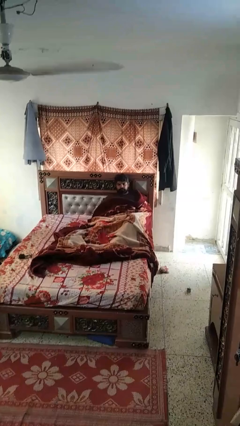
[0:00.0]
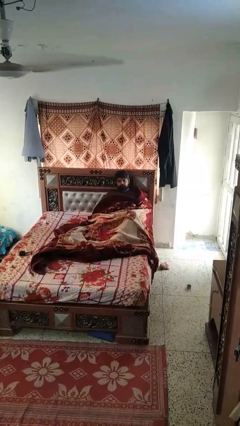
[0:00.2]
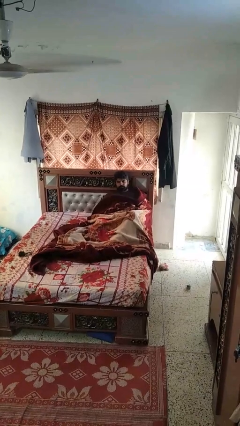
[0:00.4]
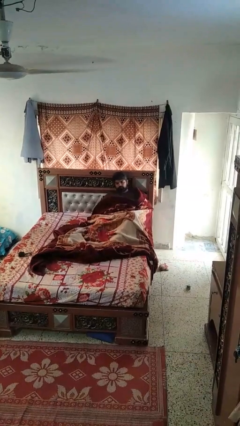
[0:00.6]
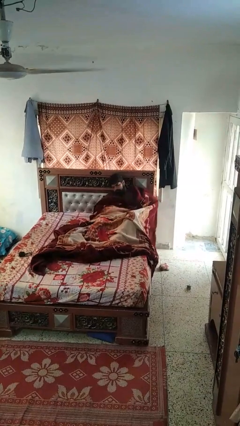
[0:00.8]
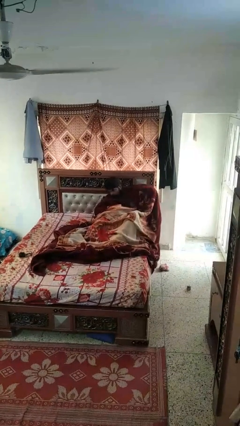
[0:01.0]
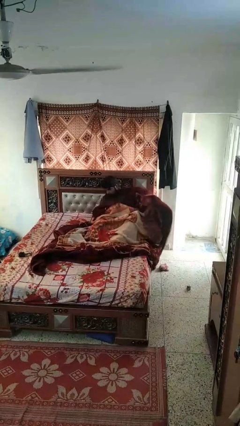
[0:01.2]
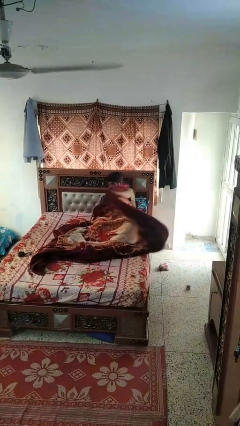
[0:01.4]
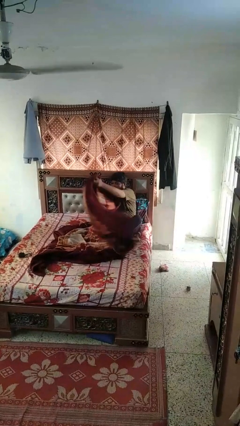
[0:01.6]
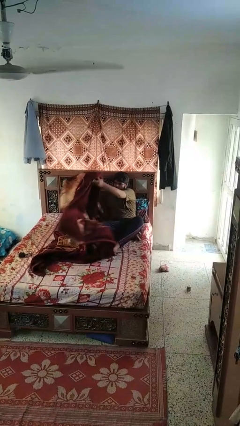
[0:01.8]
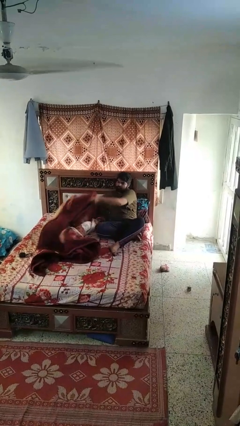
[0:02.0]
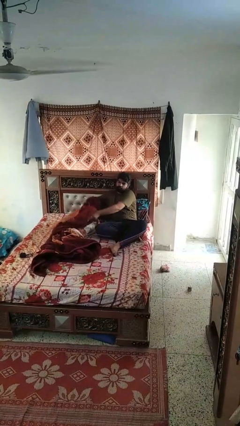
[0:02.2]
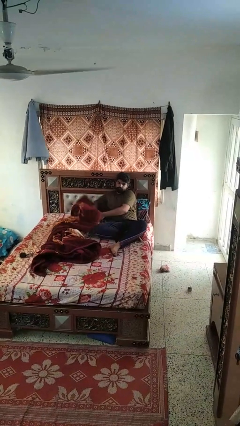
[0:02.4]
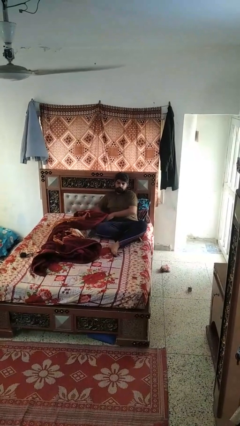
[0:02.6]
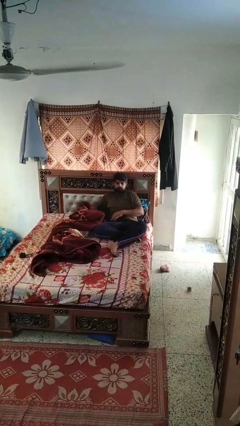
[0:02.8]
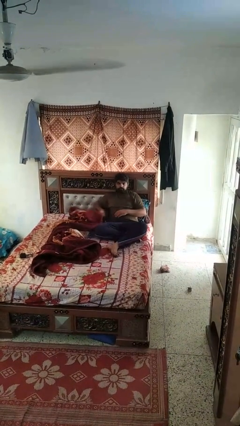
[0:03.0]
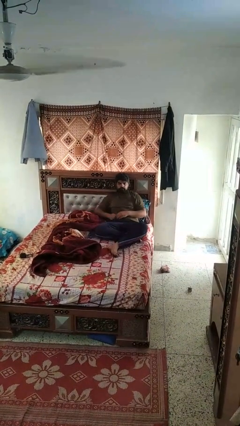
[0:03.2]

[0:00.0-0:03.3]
person uncovers with blanket

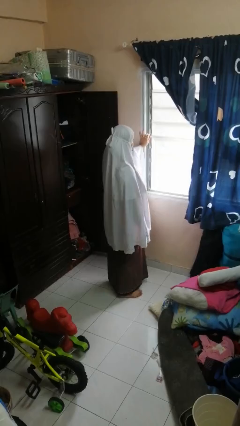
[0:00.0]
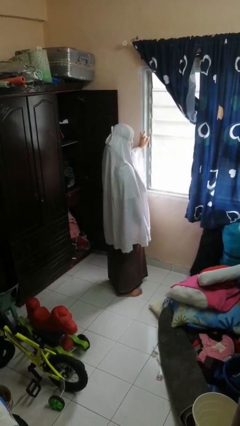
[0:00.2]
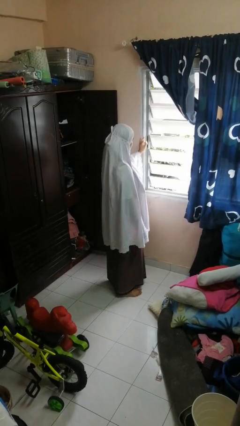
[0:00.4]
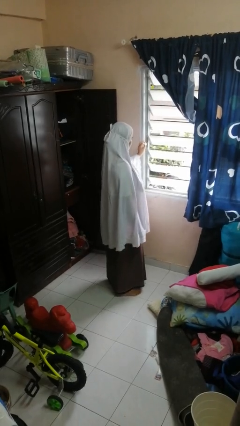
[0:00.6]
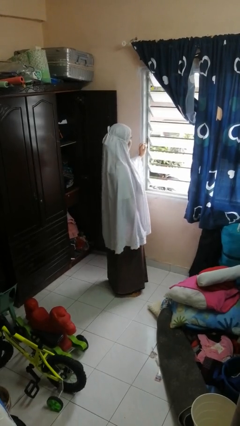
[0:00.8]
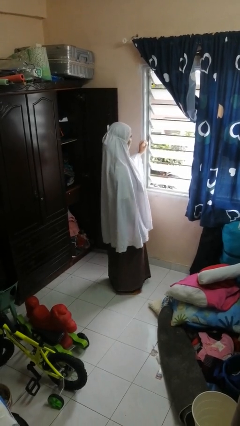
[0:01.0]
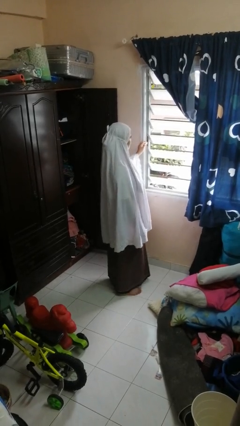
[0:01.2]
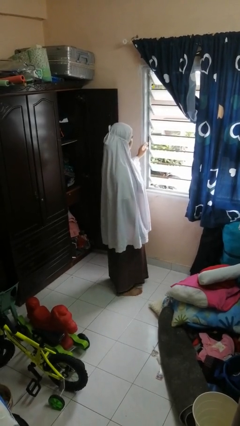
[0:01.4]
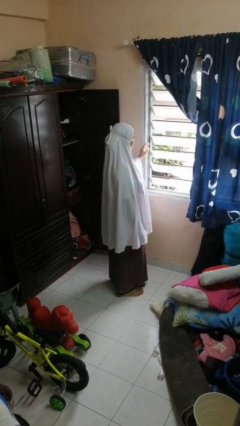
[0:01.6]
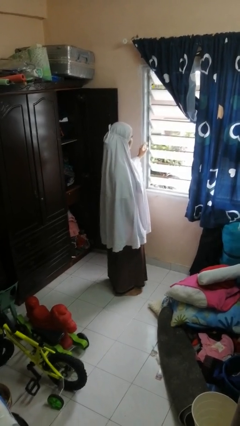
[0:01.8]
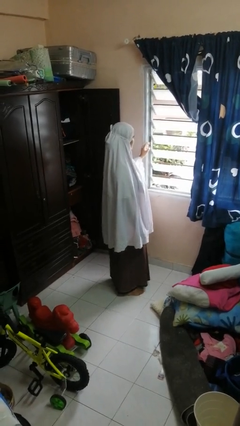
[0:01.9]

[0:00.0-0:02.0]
person opens home window

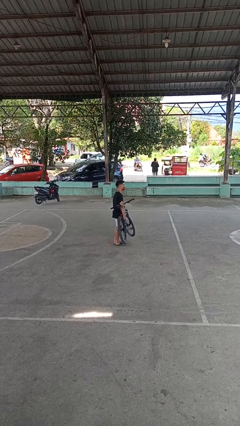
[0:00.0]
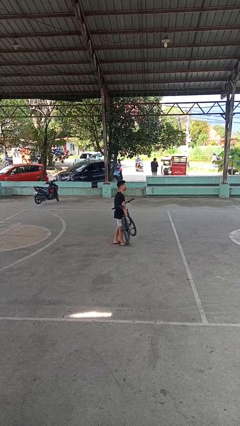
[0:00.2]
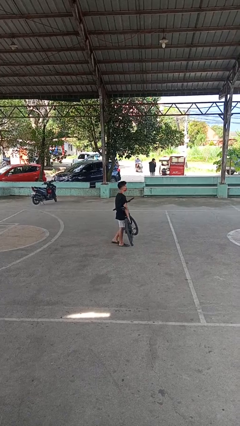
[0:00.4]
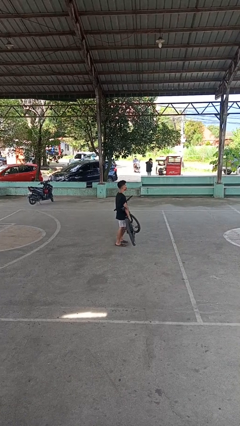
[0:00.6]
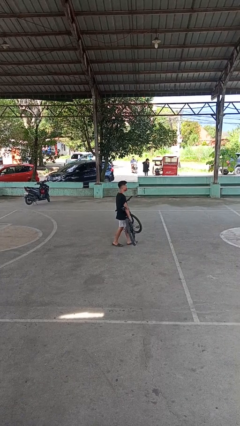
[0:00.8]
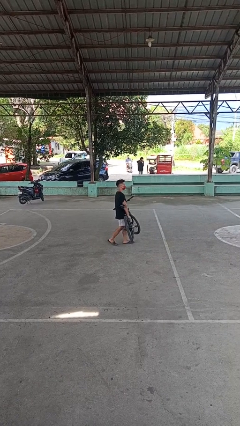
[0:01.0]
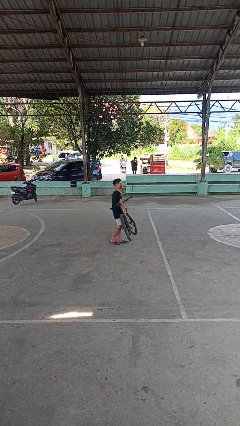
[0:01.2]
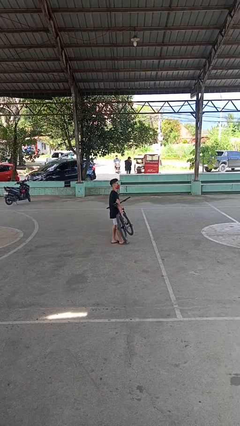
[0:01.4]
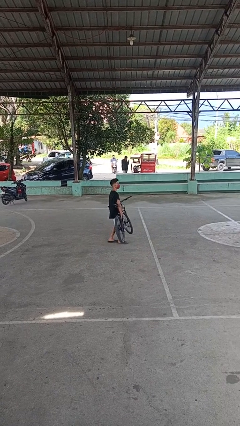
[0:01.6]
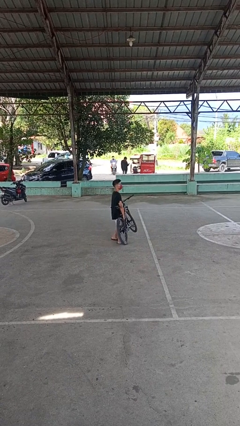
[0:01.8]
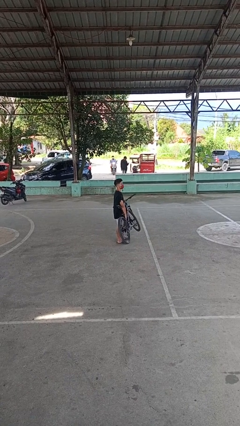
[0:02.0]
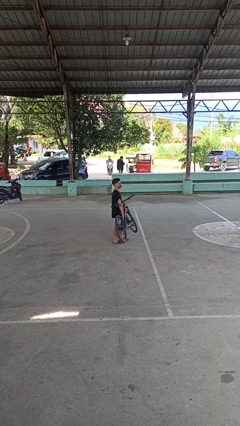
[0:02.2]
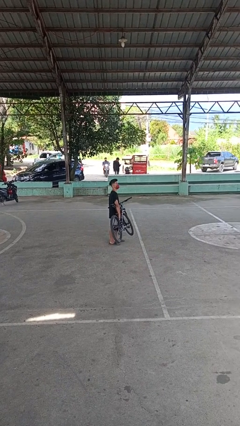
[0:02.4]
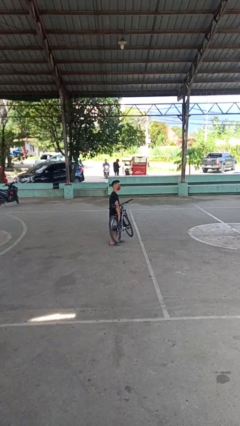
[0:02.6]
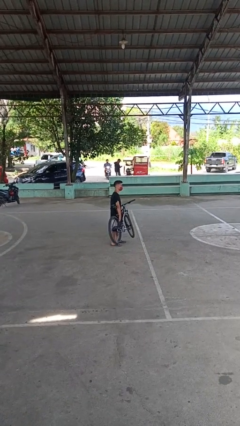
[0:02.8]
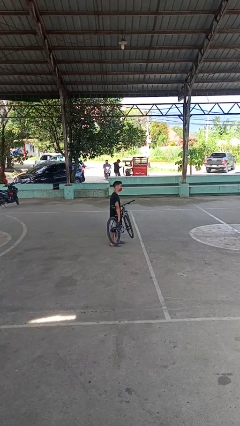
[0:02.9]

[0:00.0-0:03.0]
person carries bicycle

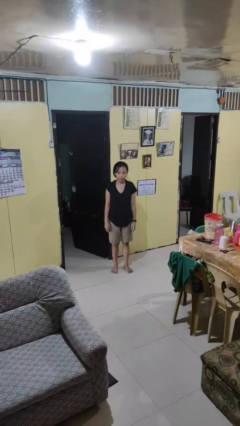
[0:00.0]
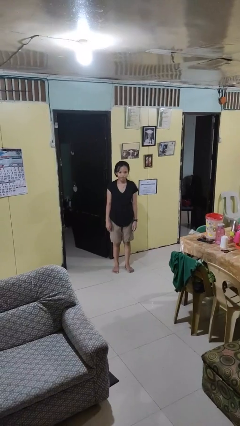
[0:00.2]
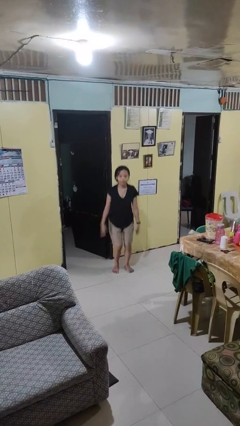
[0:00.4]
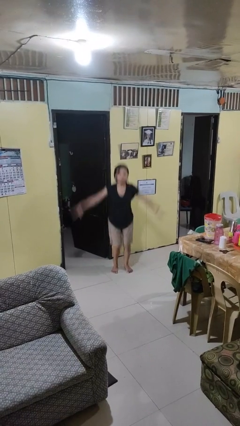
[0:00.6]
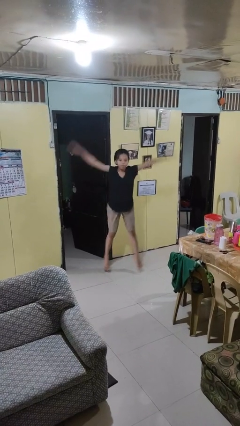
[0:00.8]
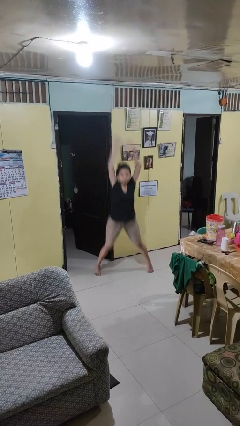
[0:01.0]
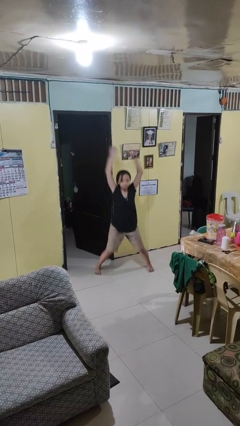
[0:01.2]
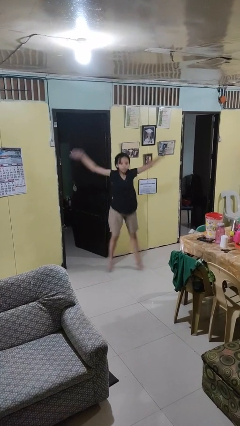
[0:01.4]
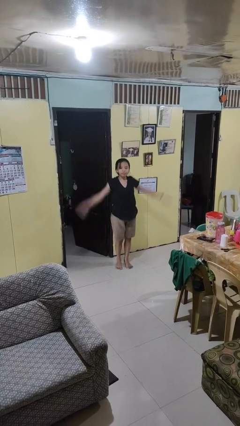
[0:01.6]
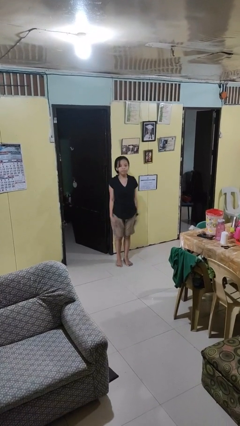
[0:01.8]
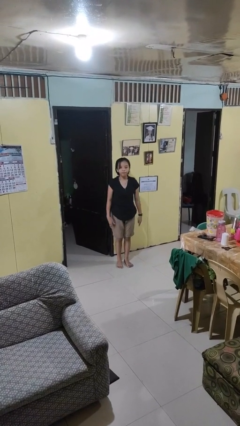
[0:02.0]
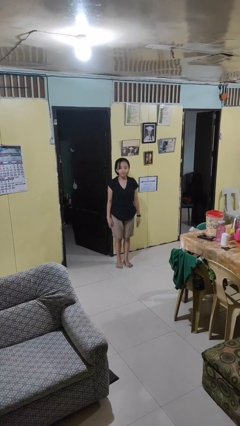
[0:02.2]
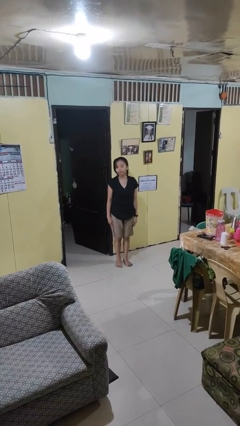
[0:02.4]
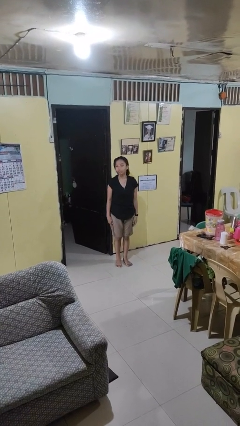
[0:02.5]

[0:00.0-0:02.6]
person exercises with jumping jacks

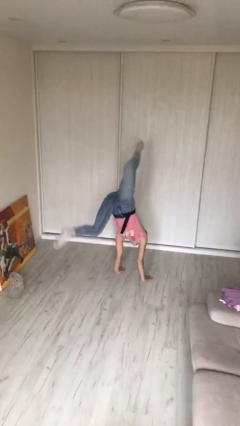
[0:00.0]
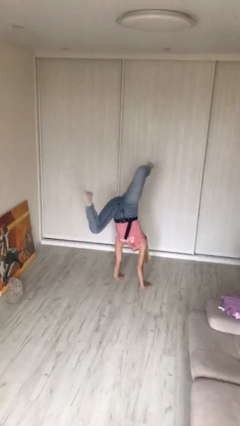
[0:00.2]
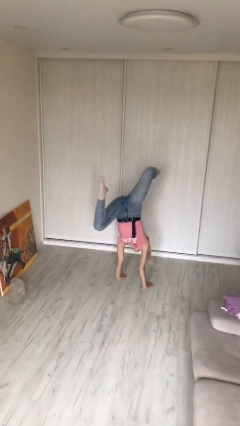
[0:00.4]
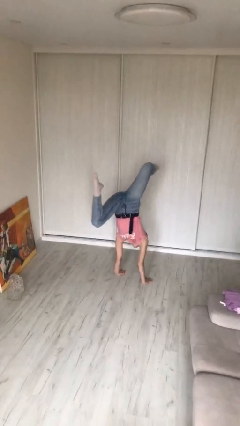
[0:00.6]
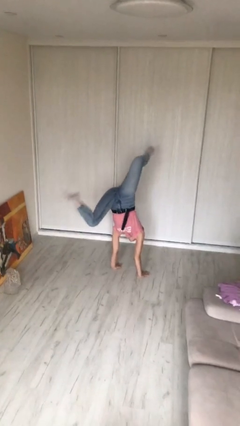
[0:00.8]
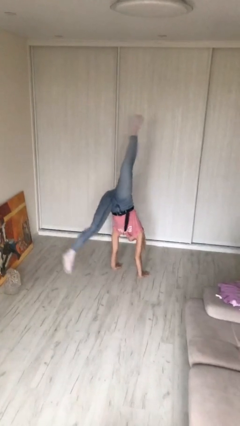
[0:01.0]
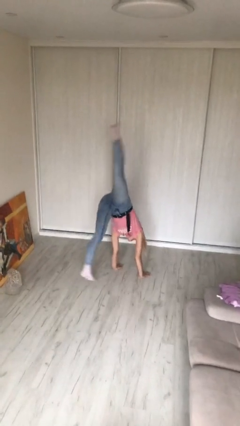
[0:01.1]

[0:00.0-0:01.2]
person handstand

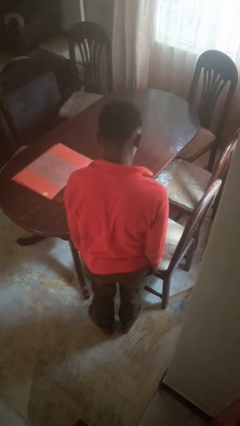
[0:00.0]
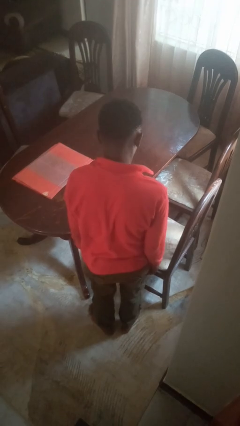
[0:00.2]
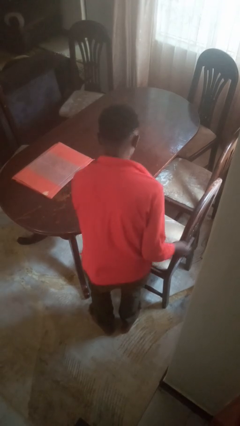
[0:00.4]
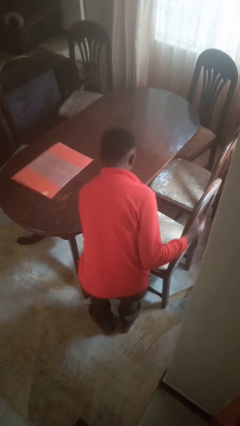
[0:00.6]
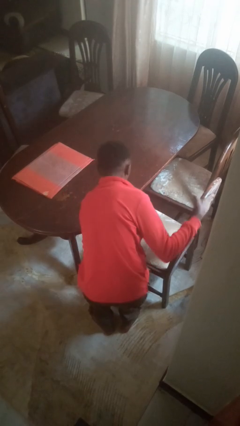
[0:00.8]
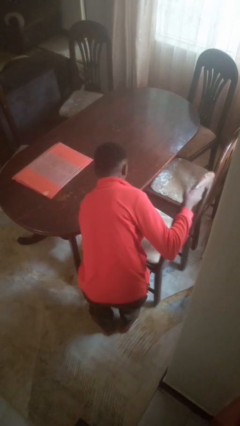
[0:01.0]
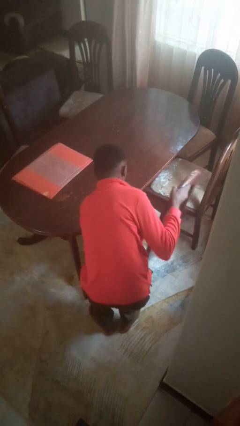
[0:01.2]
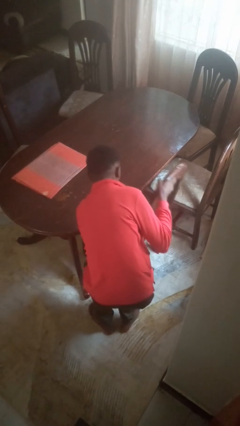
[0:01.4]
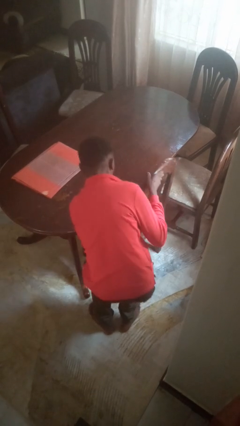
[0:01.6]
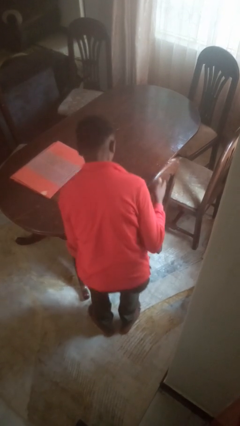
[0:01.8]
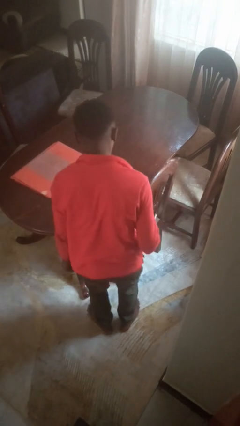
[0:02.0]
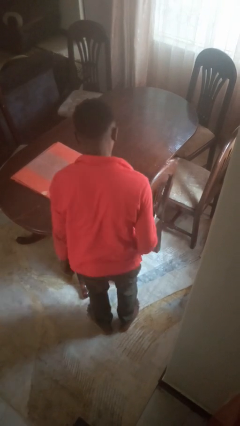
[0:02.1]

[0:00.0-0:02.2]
person pushes in chair

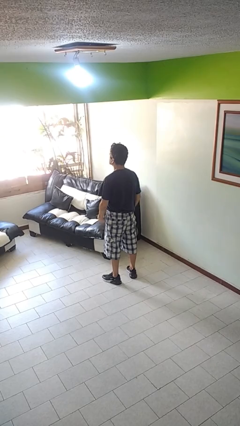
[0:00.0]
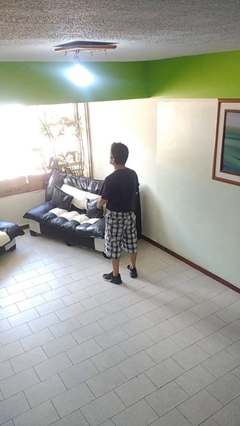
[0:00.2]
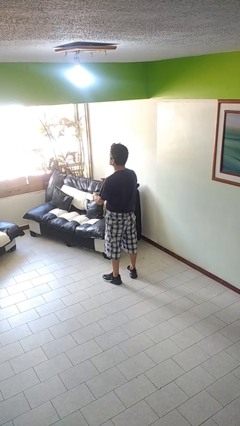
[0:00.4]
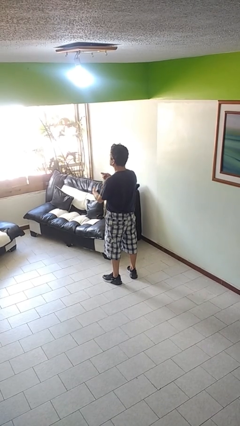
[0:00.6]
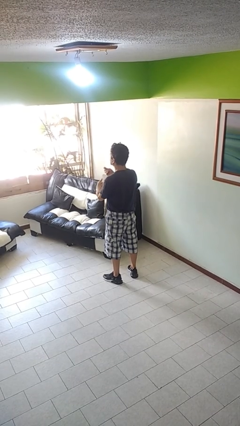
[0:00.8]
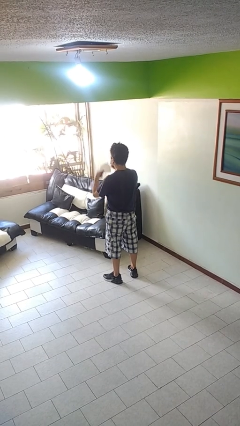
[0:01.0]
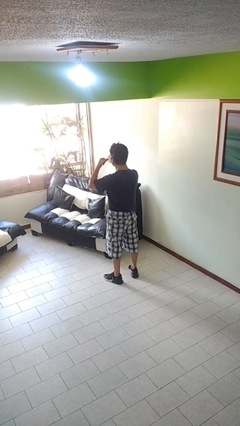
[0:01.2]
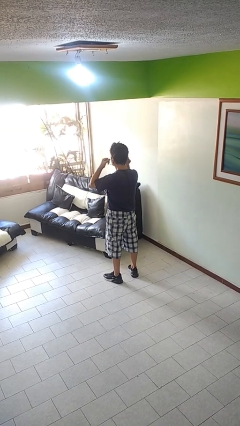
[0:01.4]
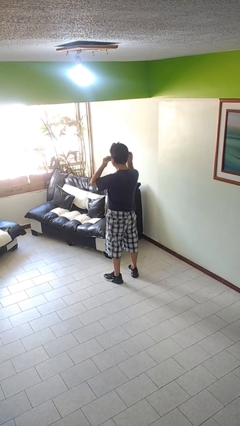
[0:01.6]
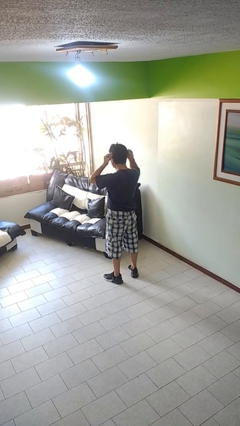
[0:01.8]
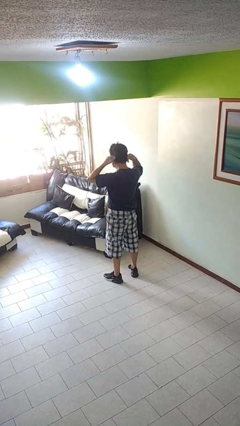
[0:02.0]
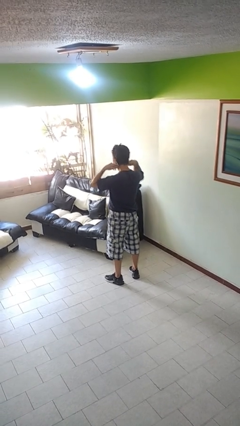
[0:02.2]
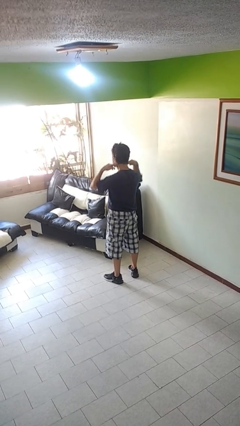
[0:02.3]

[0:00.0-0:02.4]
person puts on facemask

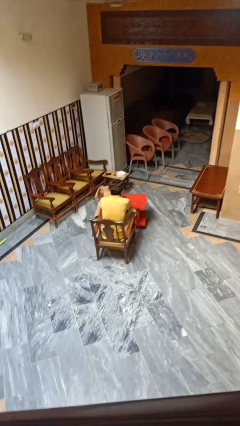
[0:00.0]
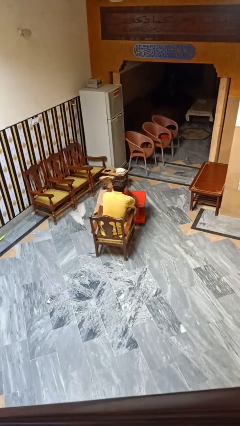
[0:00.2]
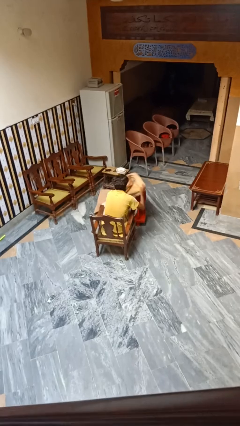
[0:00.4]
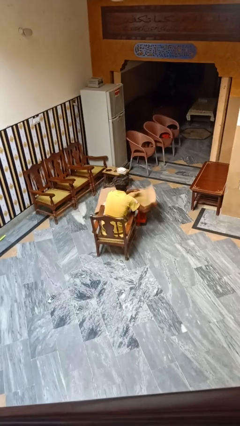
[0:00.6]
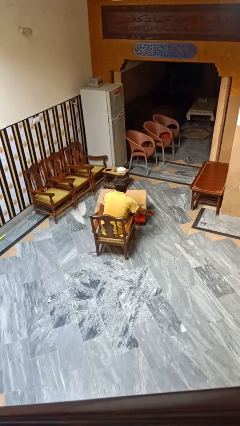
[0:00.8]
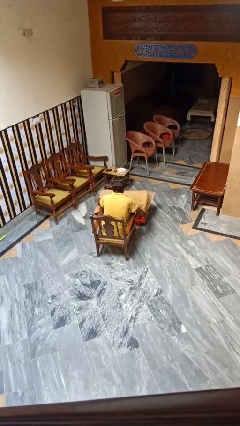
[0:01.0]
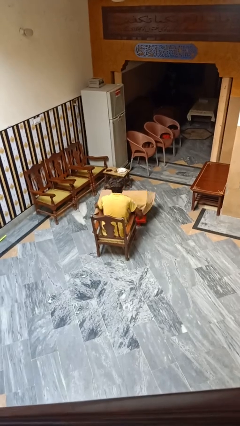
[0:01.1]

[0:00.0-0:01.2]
person spreads tablecloth
